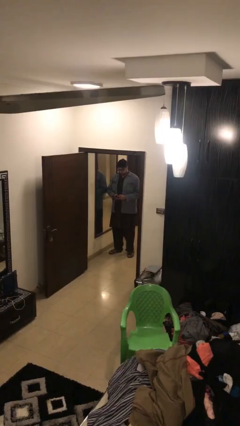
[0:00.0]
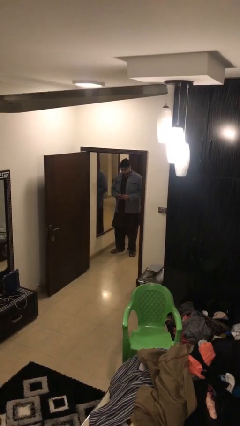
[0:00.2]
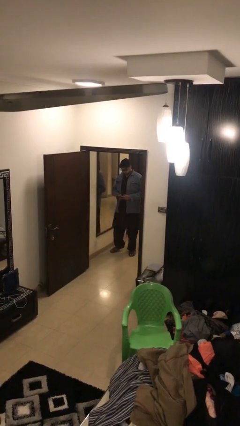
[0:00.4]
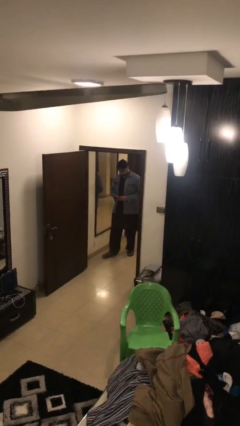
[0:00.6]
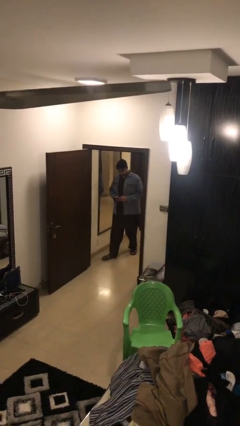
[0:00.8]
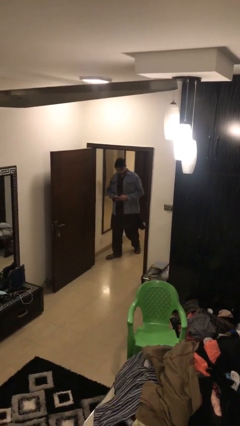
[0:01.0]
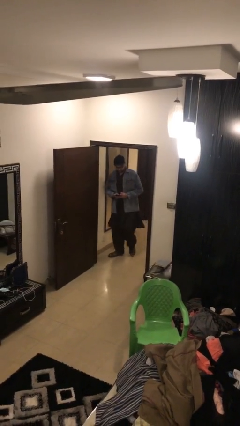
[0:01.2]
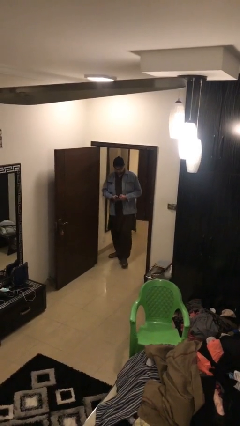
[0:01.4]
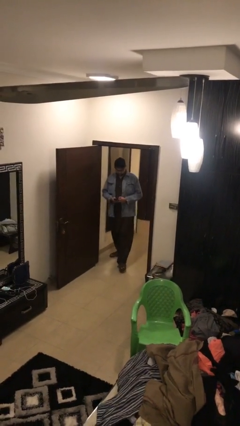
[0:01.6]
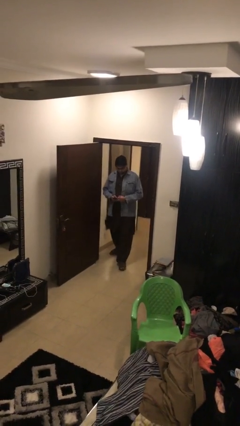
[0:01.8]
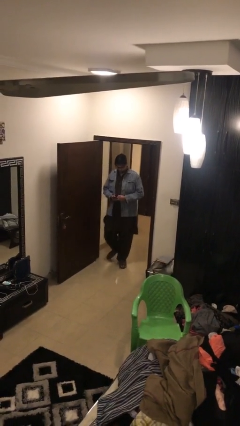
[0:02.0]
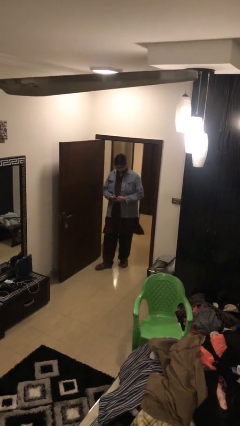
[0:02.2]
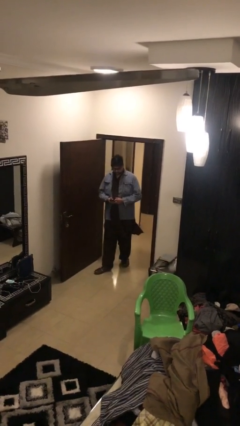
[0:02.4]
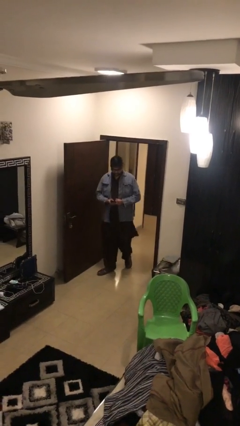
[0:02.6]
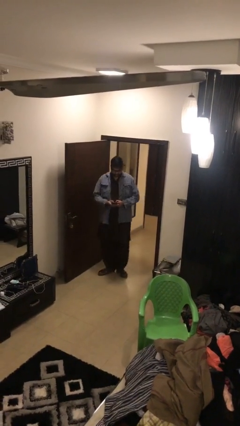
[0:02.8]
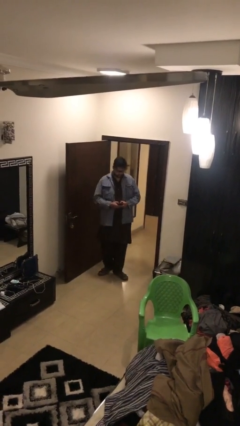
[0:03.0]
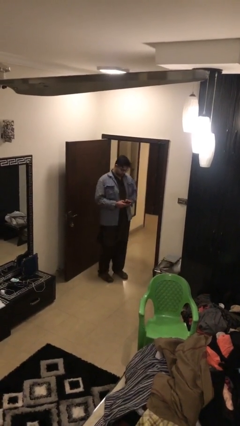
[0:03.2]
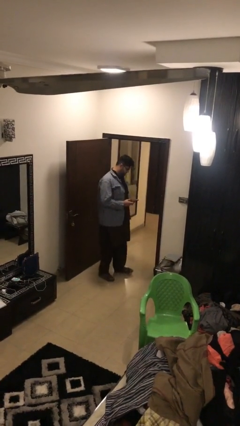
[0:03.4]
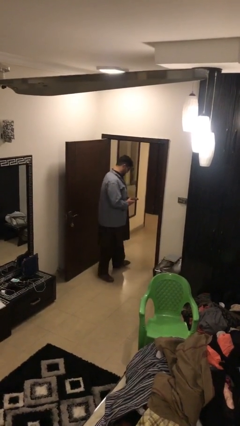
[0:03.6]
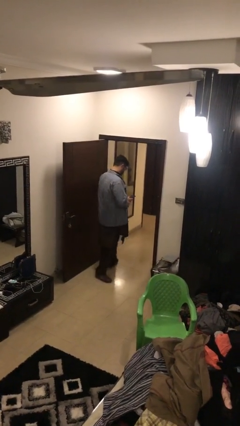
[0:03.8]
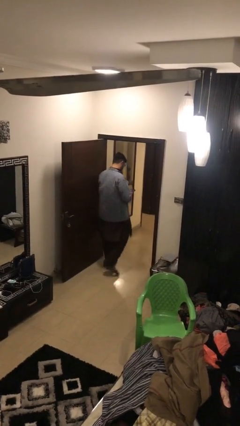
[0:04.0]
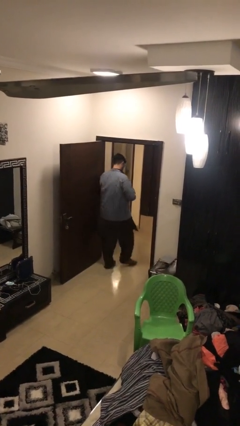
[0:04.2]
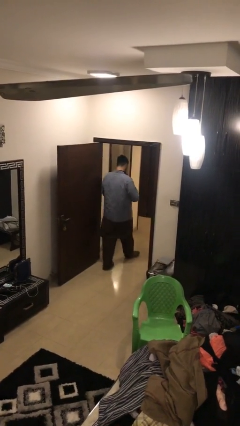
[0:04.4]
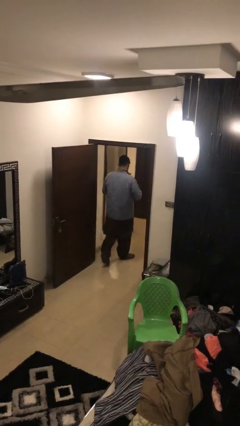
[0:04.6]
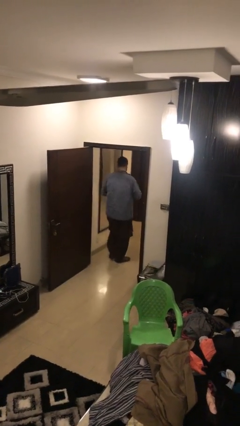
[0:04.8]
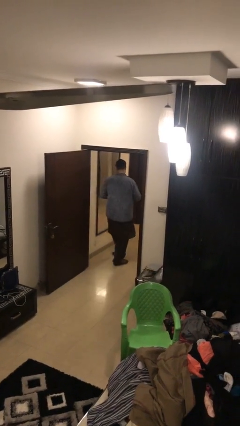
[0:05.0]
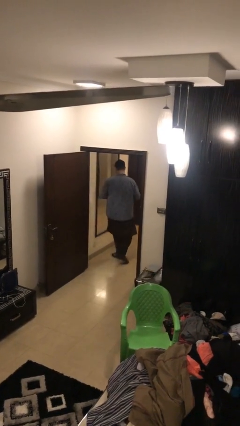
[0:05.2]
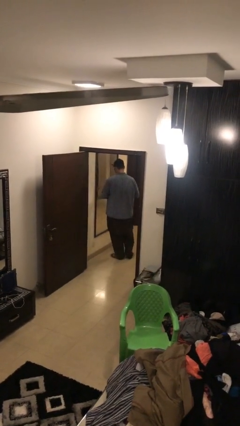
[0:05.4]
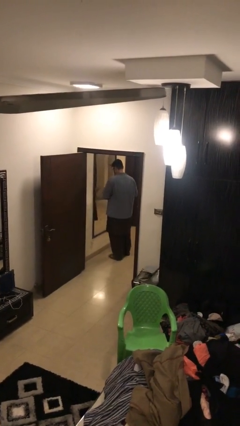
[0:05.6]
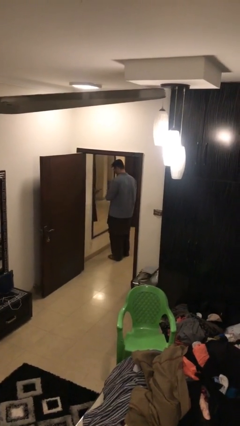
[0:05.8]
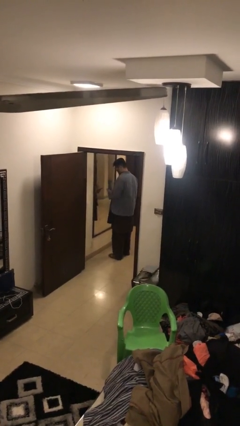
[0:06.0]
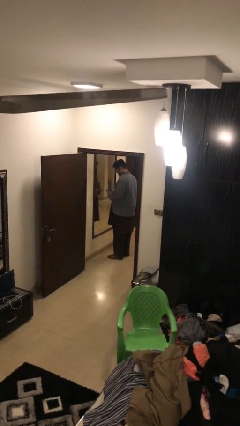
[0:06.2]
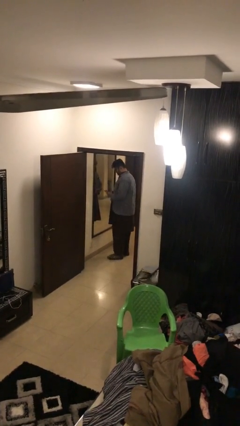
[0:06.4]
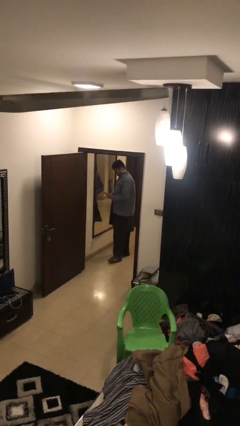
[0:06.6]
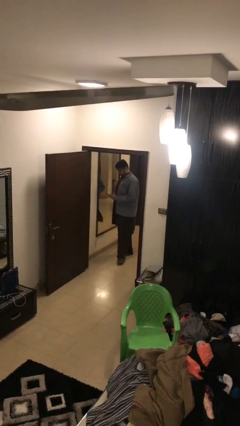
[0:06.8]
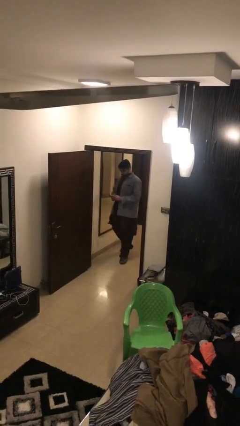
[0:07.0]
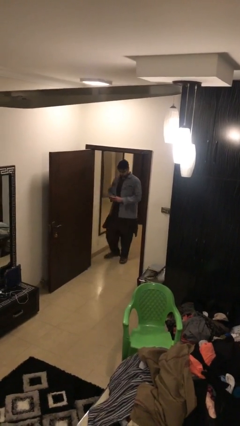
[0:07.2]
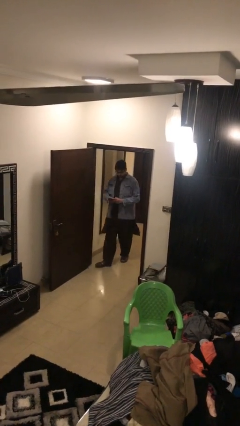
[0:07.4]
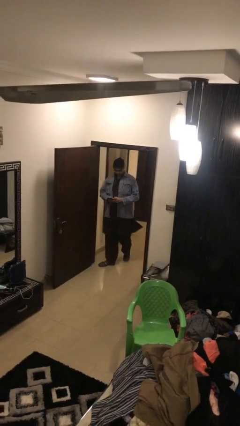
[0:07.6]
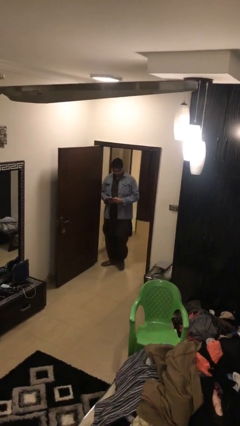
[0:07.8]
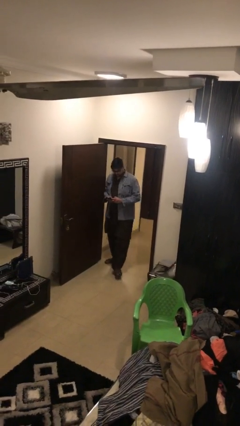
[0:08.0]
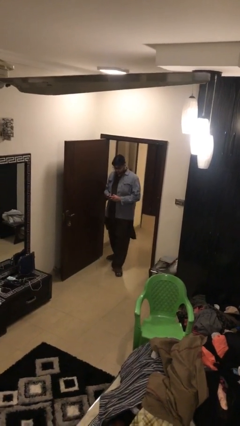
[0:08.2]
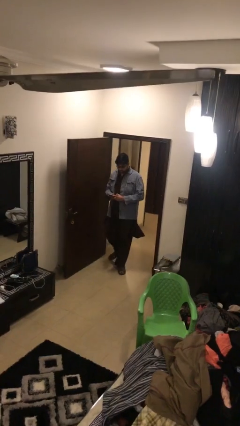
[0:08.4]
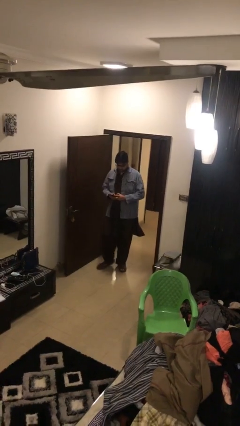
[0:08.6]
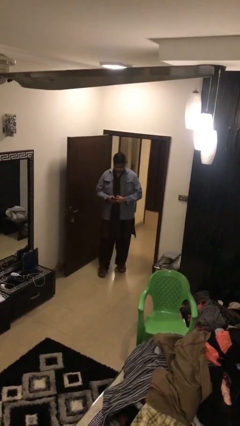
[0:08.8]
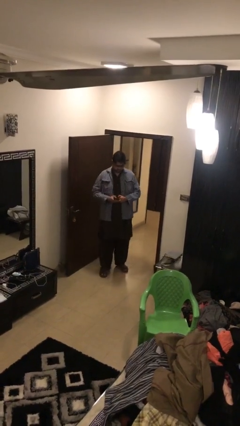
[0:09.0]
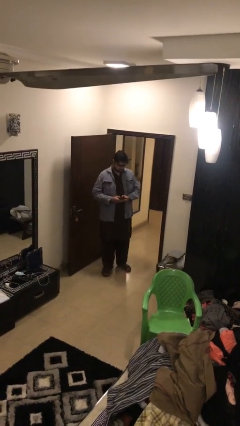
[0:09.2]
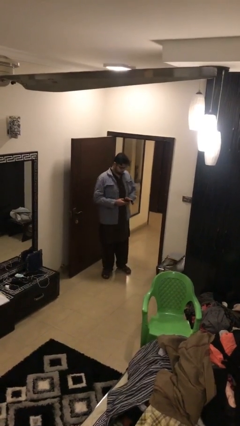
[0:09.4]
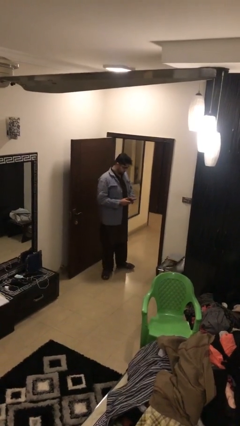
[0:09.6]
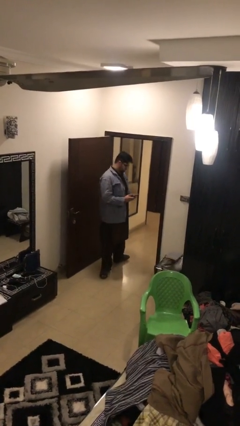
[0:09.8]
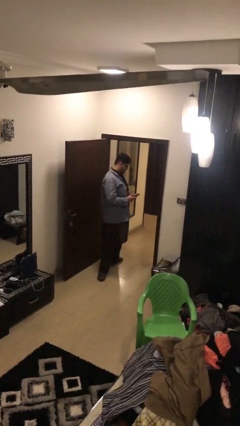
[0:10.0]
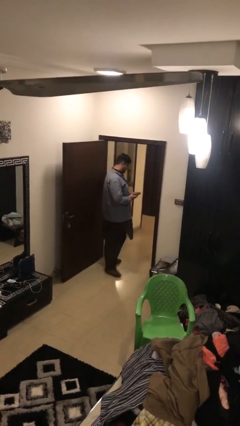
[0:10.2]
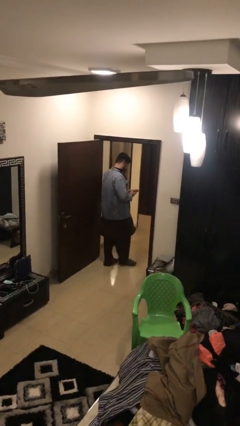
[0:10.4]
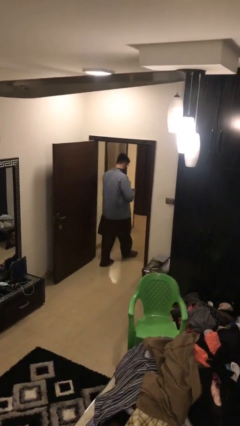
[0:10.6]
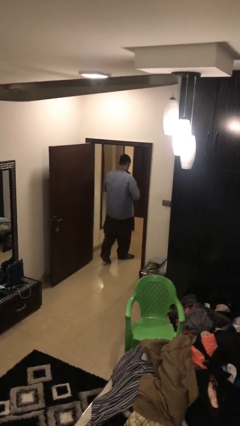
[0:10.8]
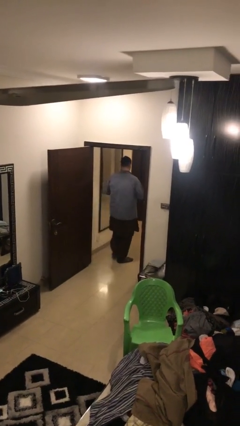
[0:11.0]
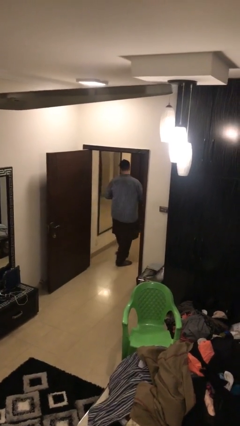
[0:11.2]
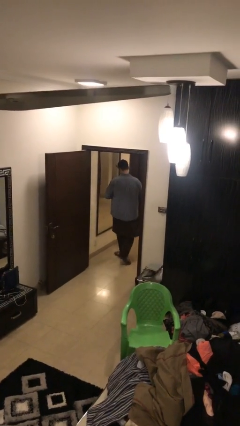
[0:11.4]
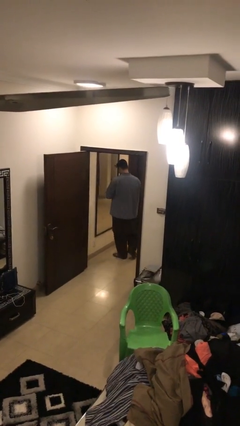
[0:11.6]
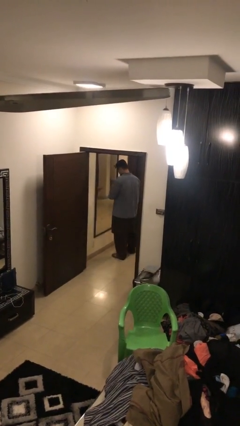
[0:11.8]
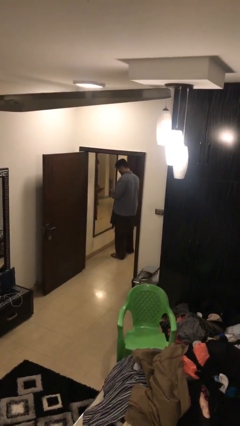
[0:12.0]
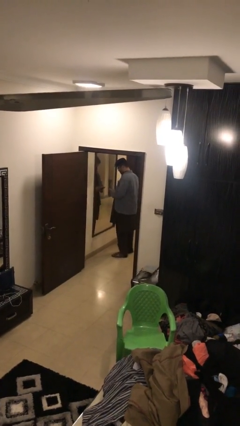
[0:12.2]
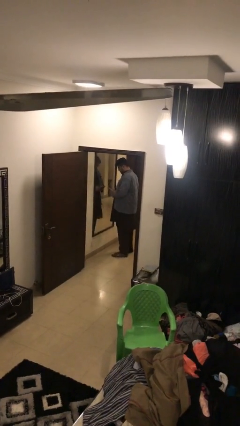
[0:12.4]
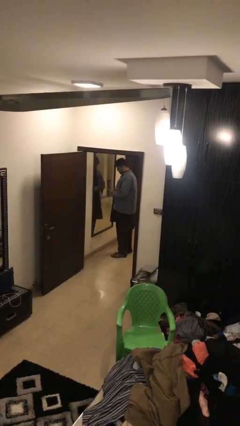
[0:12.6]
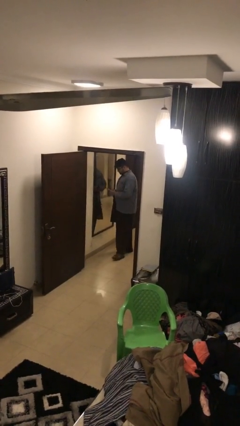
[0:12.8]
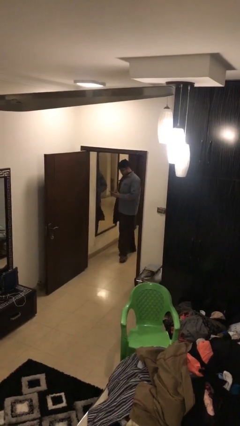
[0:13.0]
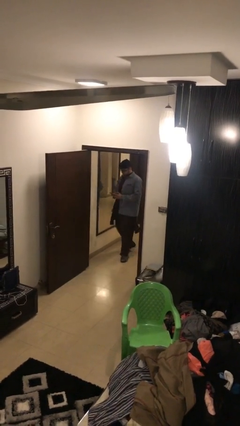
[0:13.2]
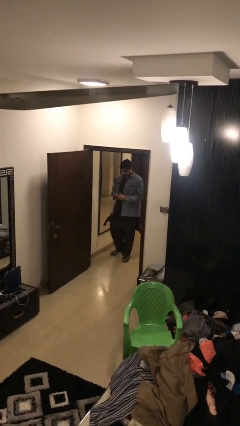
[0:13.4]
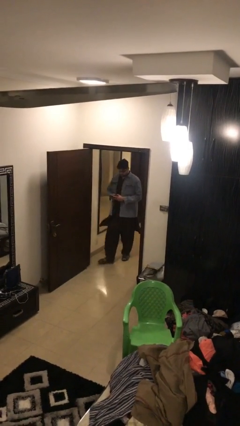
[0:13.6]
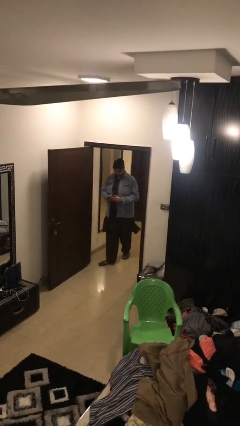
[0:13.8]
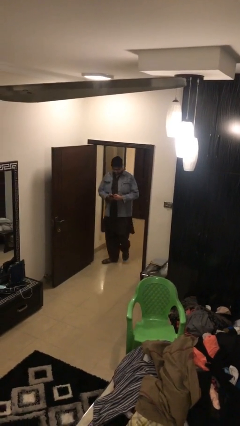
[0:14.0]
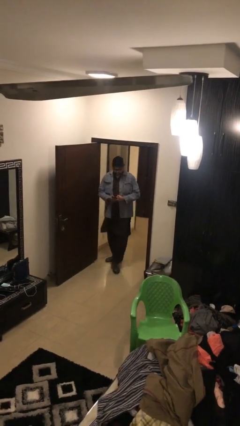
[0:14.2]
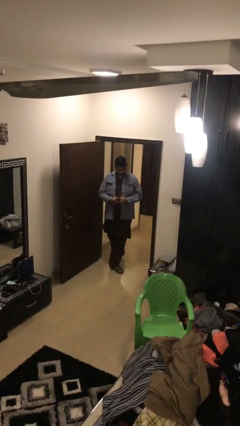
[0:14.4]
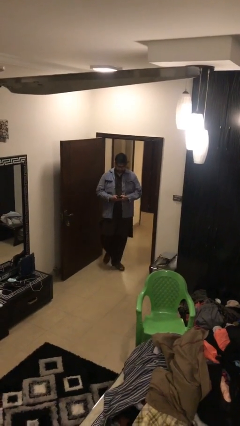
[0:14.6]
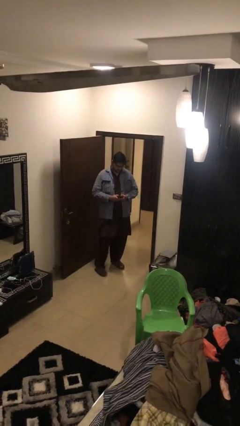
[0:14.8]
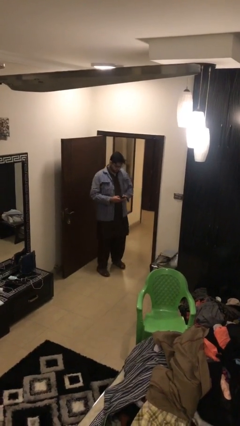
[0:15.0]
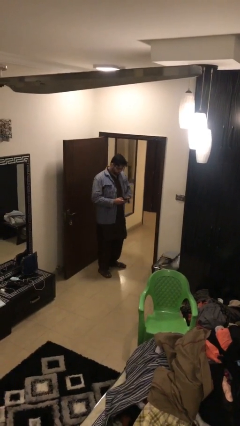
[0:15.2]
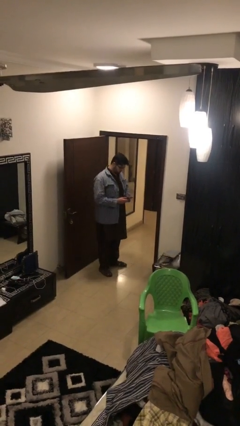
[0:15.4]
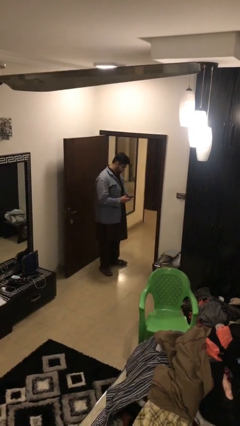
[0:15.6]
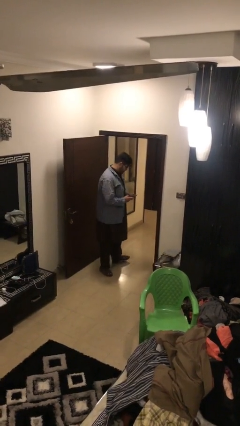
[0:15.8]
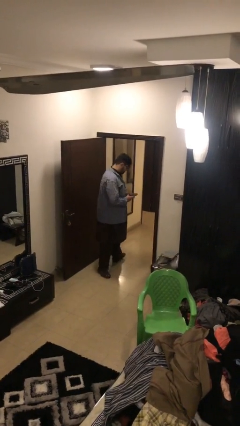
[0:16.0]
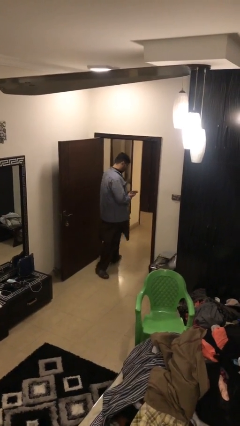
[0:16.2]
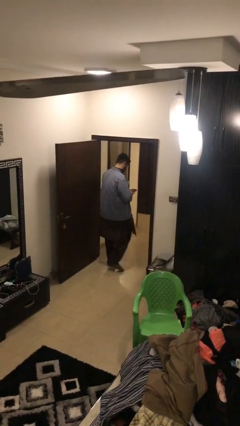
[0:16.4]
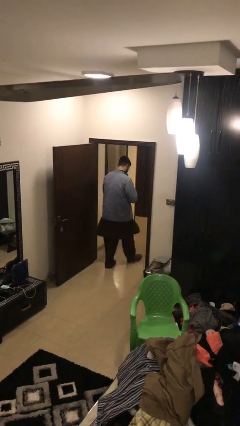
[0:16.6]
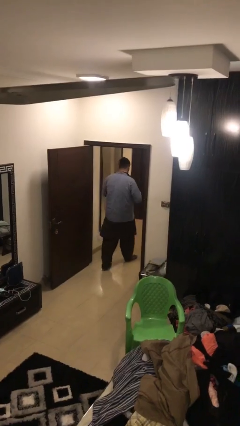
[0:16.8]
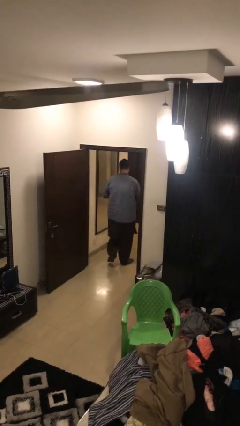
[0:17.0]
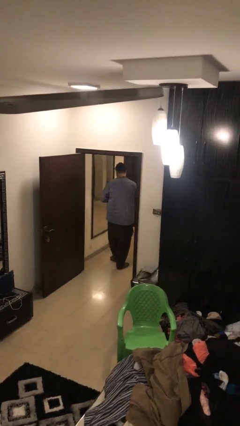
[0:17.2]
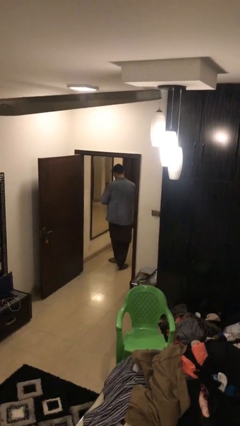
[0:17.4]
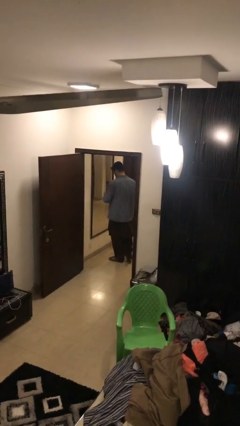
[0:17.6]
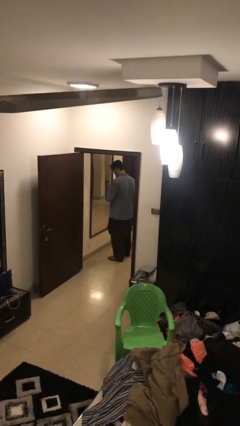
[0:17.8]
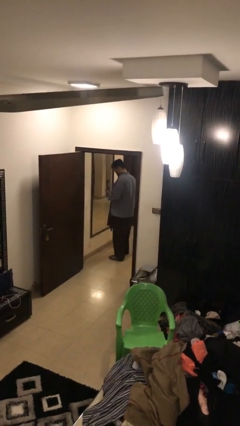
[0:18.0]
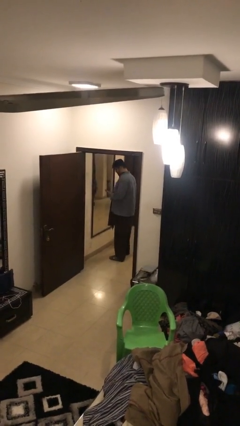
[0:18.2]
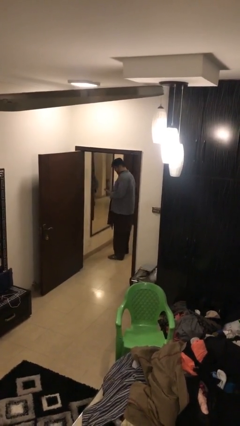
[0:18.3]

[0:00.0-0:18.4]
person texts on phone
